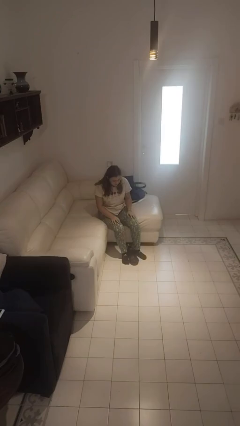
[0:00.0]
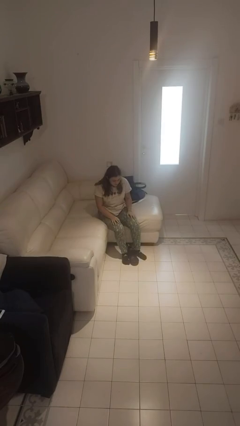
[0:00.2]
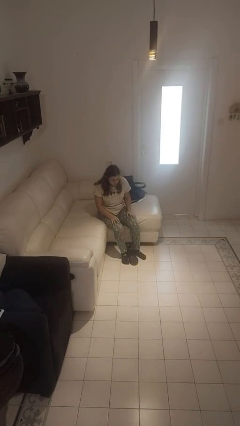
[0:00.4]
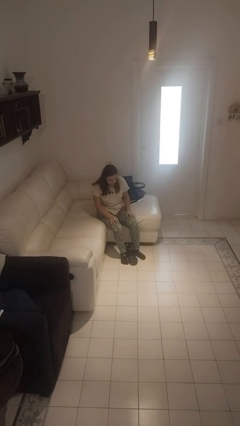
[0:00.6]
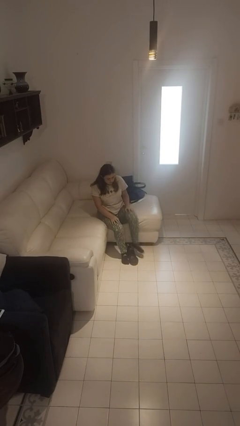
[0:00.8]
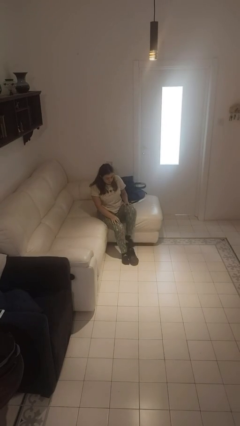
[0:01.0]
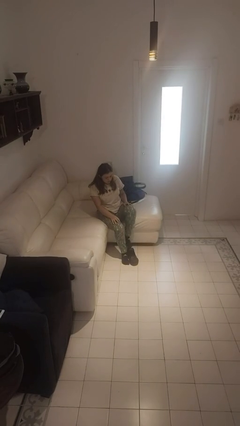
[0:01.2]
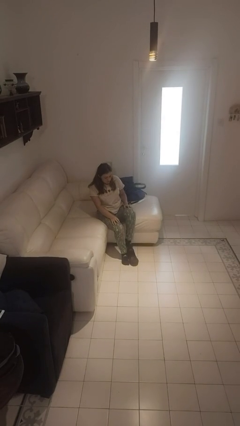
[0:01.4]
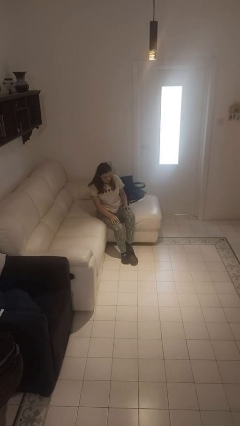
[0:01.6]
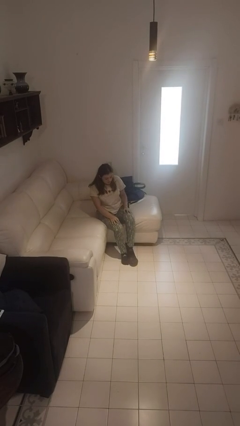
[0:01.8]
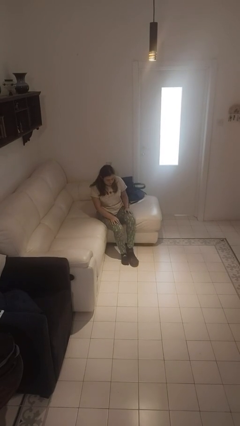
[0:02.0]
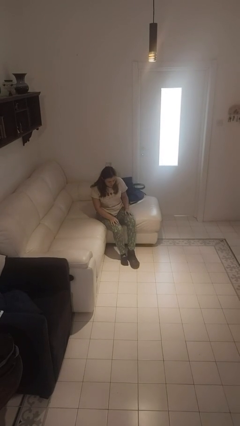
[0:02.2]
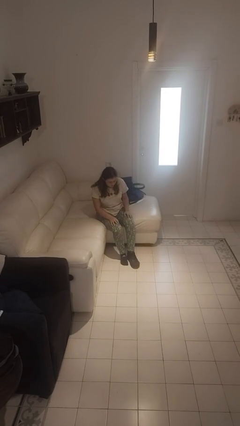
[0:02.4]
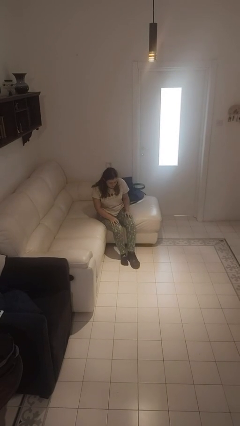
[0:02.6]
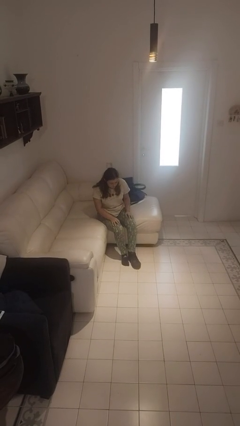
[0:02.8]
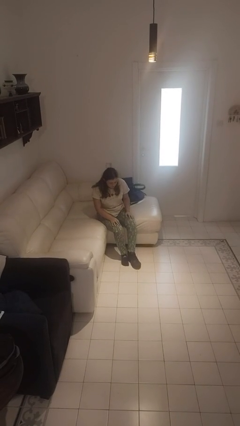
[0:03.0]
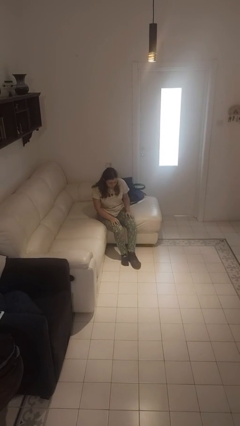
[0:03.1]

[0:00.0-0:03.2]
person puts on shoes

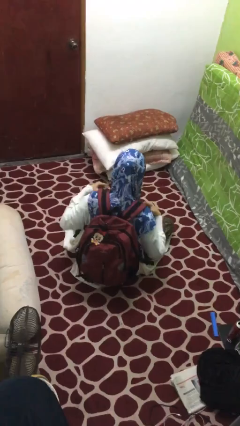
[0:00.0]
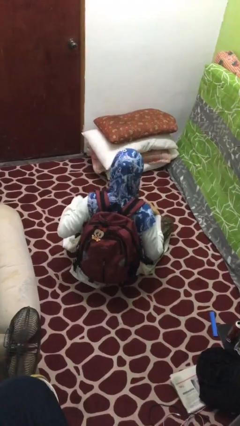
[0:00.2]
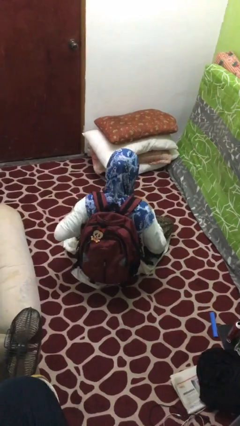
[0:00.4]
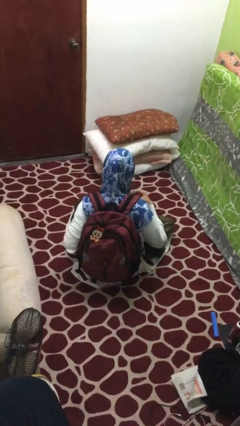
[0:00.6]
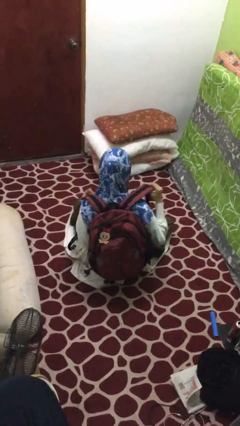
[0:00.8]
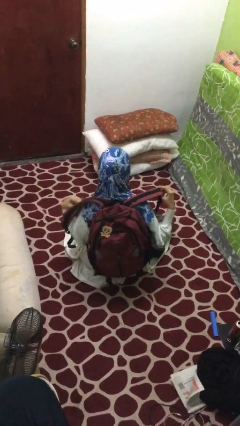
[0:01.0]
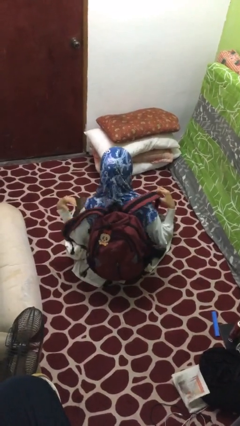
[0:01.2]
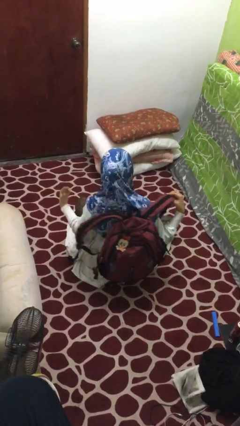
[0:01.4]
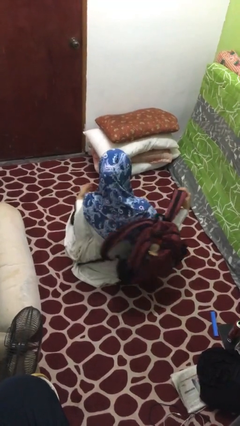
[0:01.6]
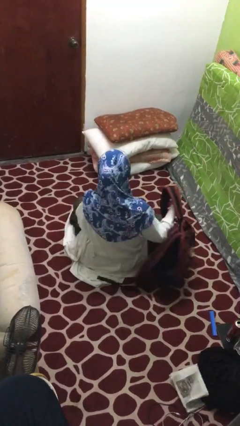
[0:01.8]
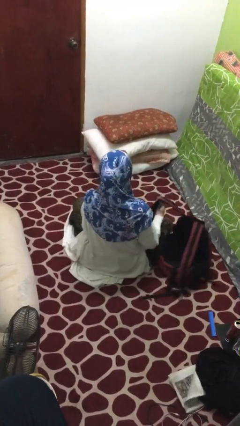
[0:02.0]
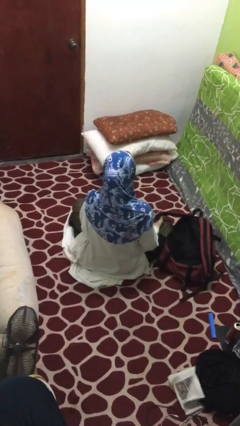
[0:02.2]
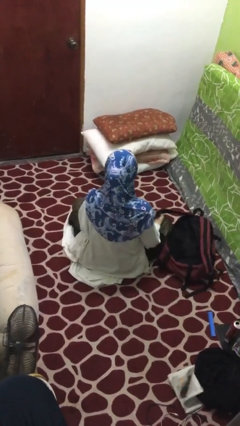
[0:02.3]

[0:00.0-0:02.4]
person takes off backpack

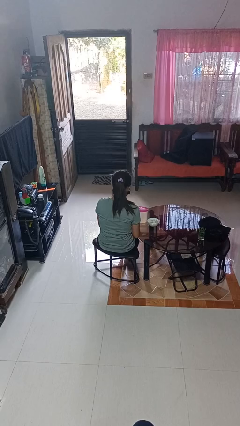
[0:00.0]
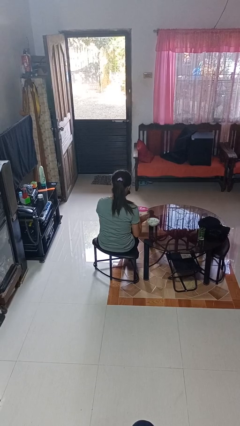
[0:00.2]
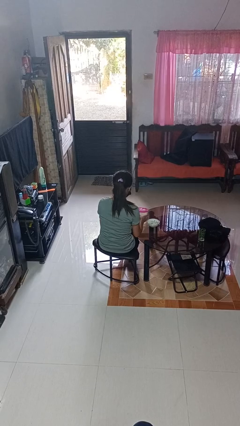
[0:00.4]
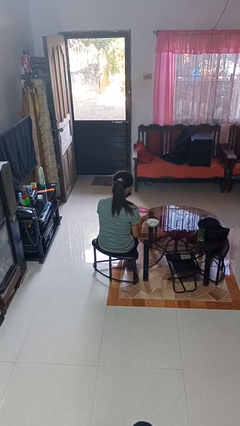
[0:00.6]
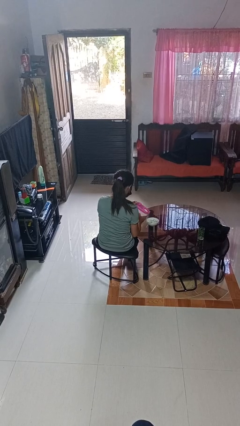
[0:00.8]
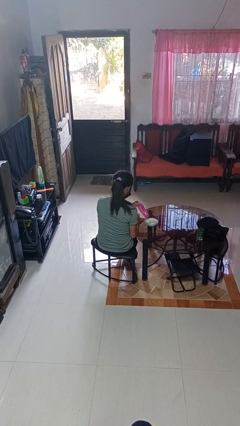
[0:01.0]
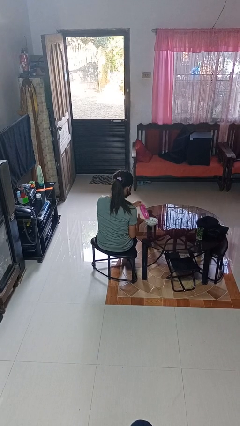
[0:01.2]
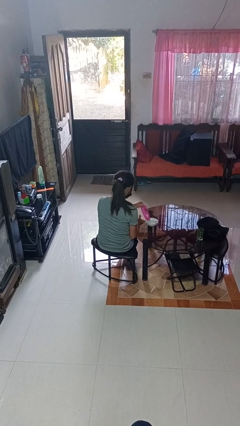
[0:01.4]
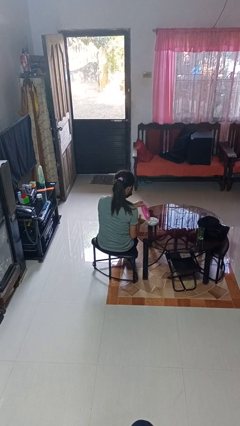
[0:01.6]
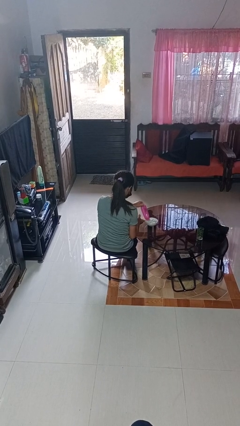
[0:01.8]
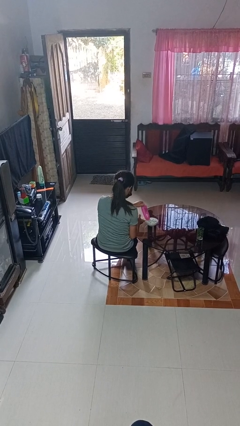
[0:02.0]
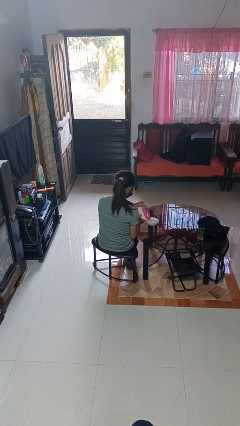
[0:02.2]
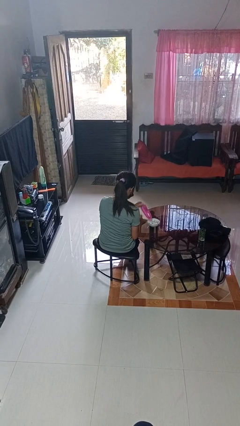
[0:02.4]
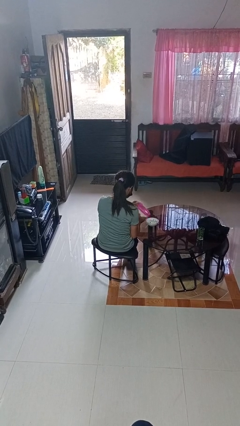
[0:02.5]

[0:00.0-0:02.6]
person pours into bowl

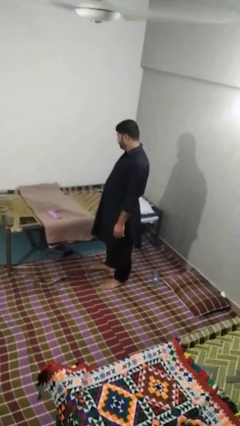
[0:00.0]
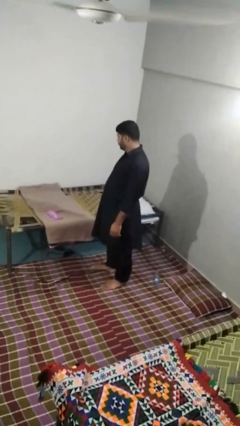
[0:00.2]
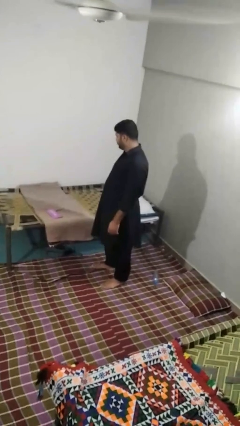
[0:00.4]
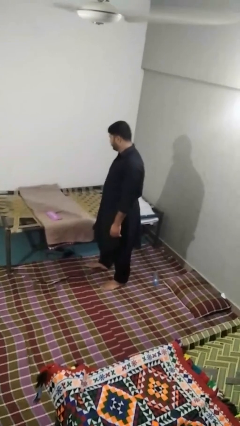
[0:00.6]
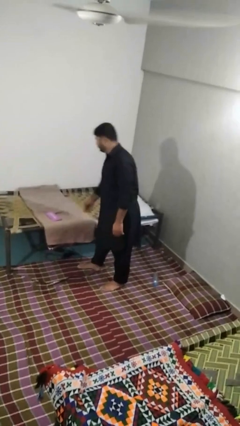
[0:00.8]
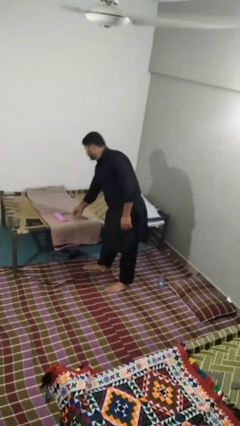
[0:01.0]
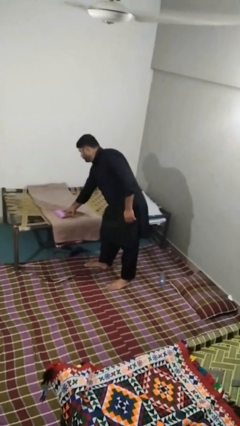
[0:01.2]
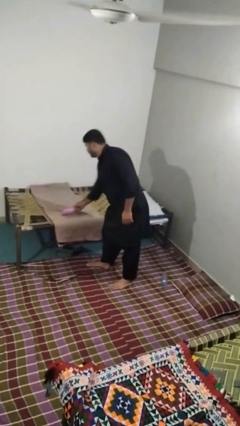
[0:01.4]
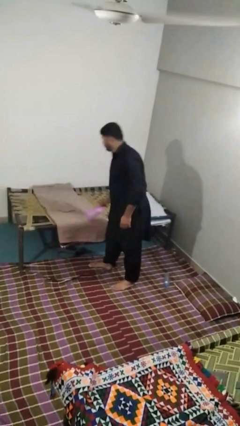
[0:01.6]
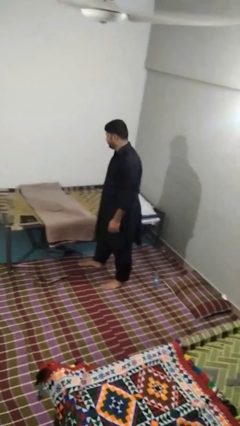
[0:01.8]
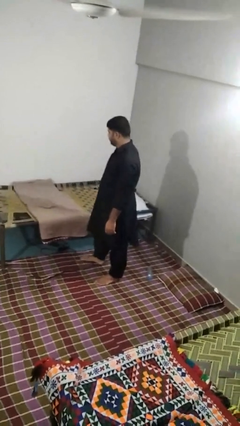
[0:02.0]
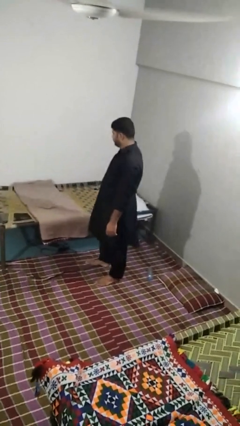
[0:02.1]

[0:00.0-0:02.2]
person picks up object from bed

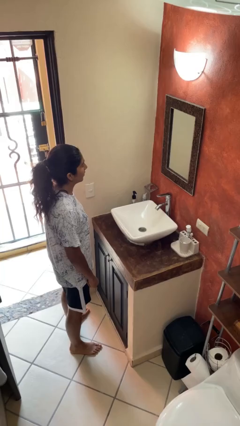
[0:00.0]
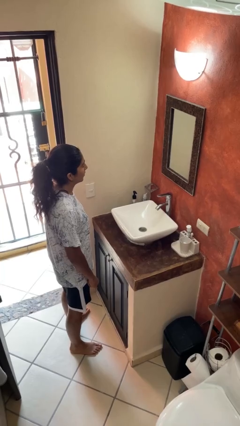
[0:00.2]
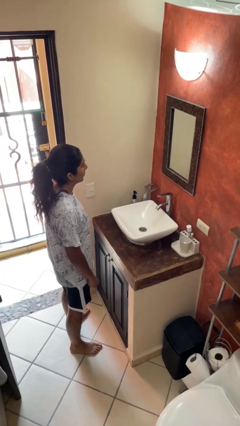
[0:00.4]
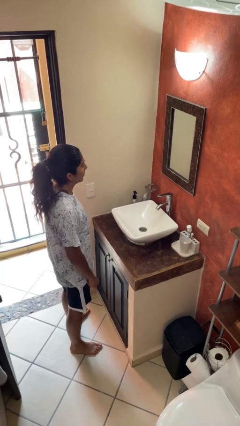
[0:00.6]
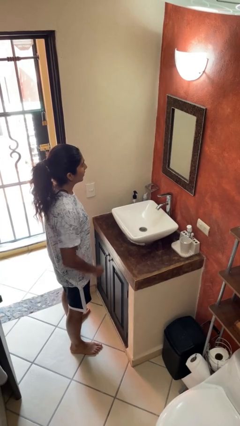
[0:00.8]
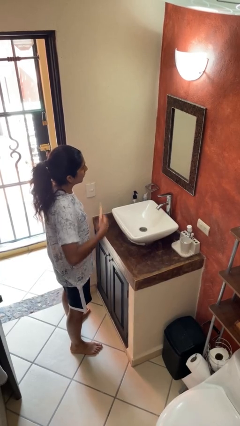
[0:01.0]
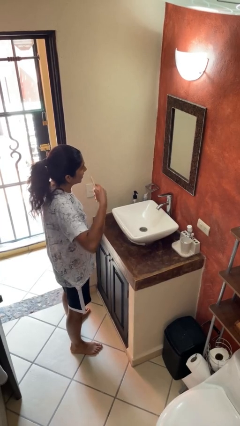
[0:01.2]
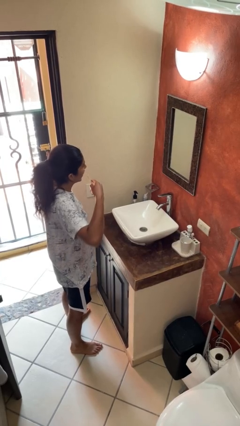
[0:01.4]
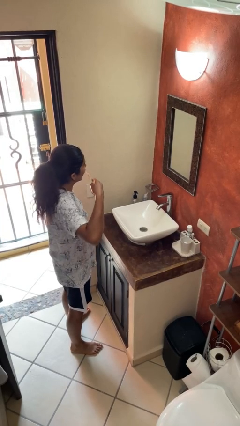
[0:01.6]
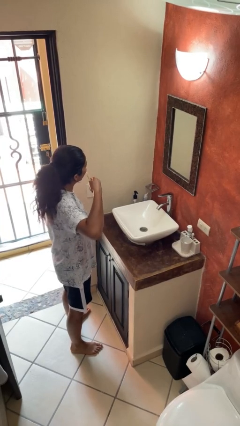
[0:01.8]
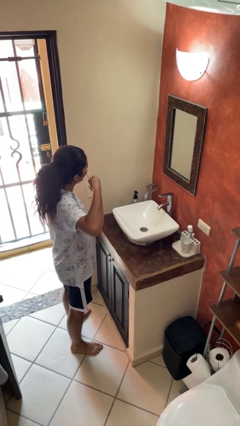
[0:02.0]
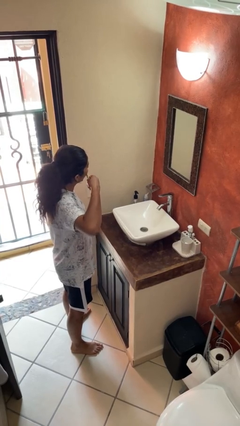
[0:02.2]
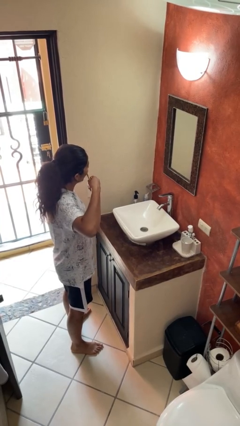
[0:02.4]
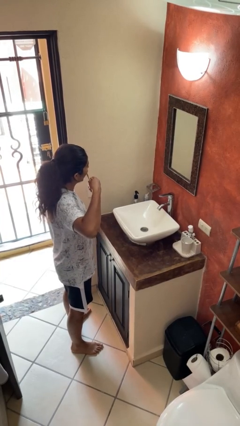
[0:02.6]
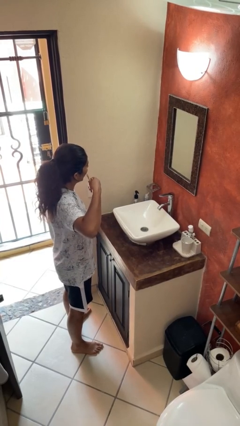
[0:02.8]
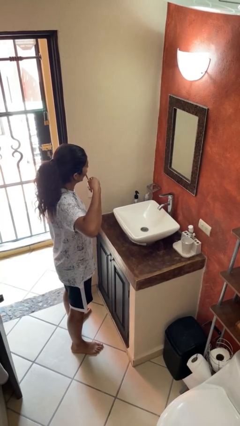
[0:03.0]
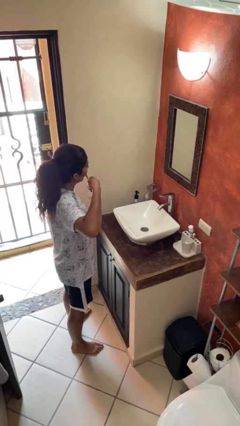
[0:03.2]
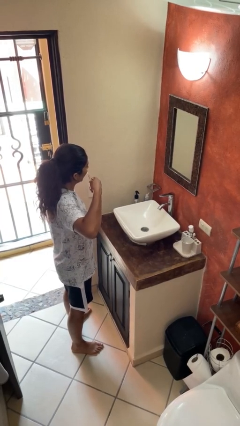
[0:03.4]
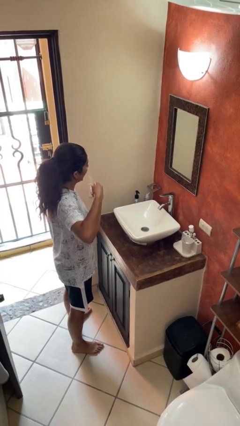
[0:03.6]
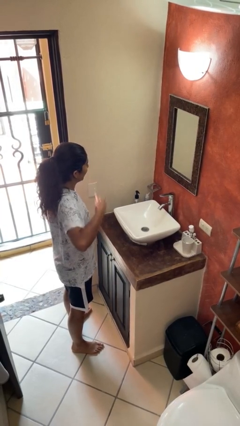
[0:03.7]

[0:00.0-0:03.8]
person brushes teeth

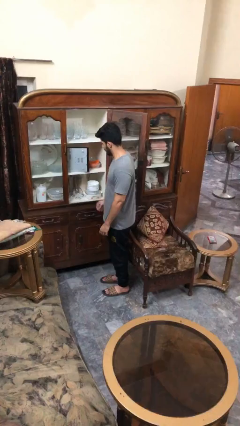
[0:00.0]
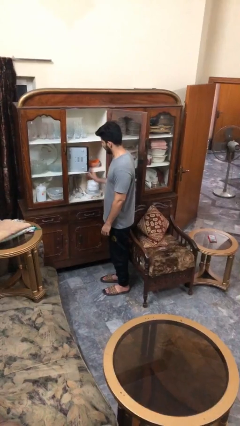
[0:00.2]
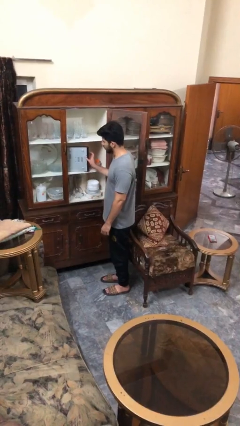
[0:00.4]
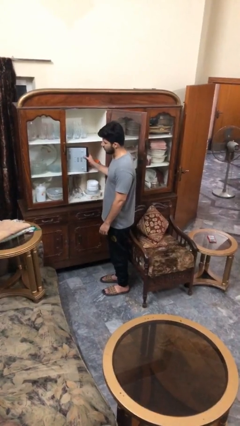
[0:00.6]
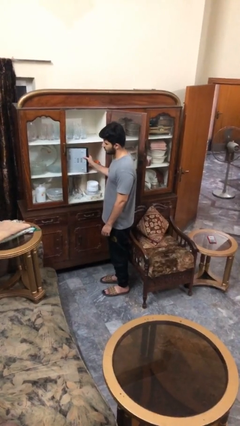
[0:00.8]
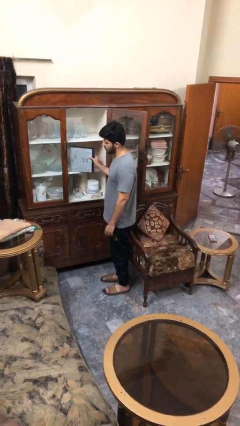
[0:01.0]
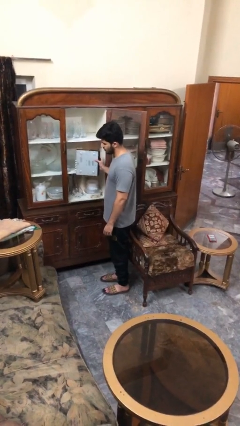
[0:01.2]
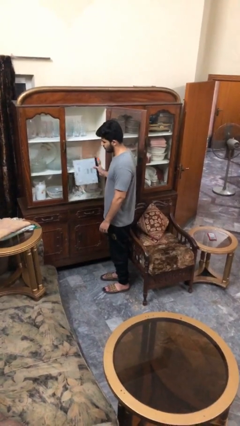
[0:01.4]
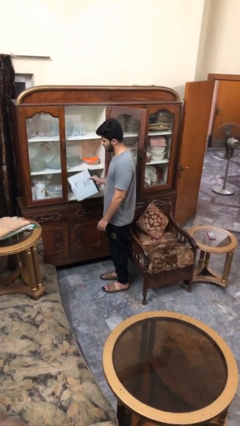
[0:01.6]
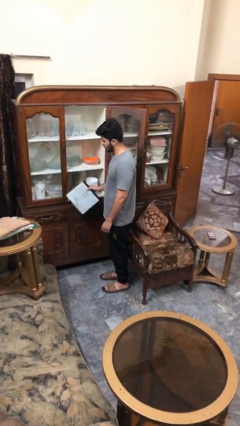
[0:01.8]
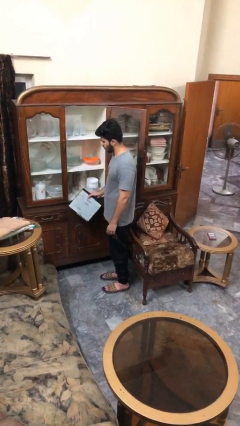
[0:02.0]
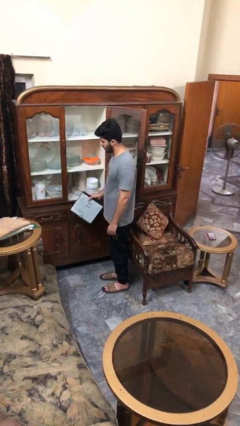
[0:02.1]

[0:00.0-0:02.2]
person picks up object from cabinet

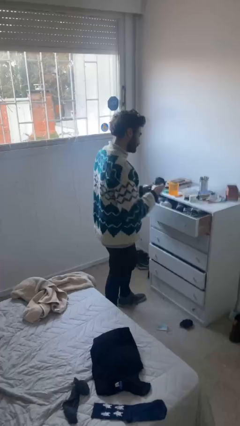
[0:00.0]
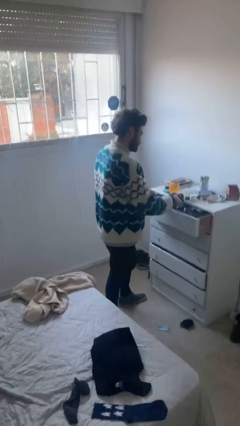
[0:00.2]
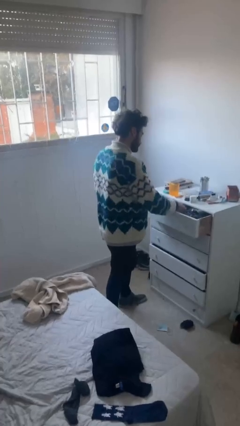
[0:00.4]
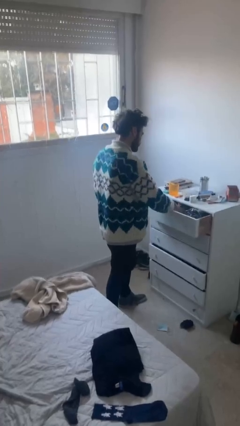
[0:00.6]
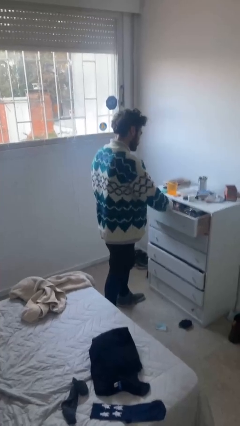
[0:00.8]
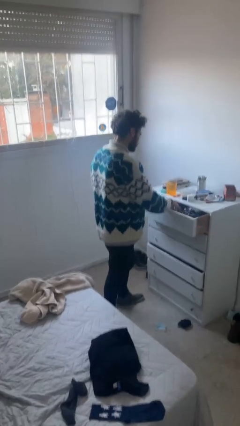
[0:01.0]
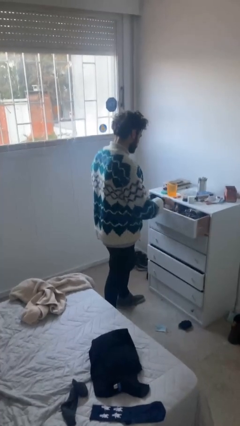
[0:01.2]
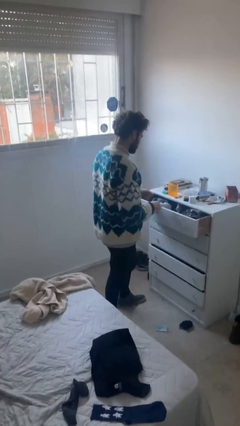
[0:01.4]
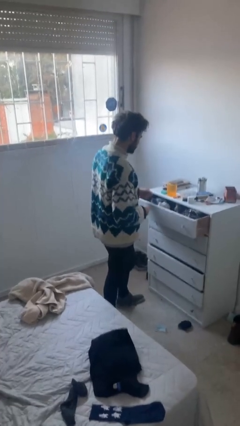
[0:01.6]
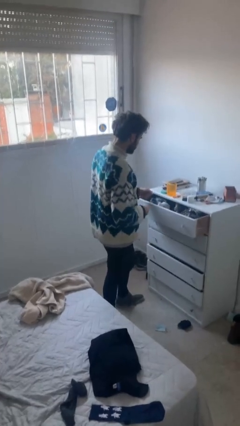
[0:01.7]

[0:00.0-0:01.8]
person puts clothes into dresser
